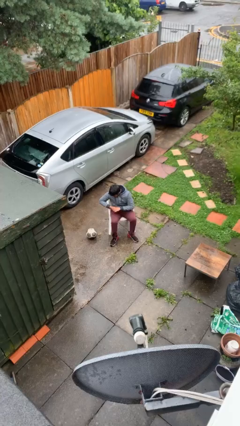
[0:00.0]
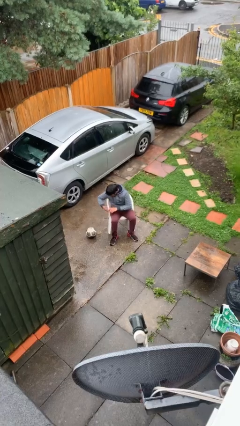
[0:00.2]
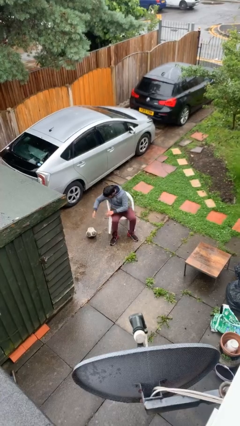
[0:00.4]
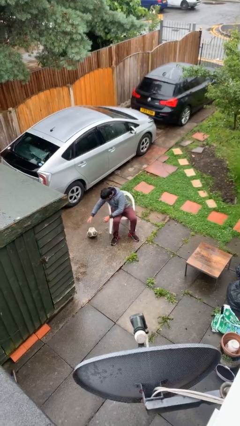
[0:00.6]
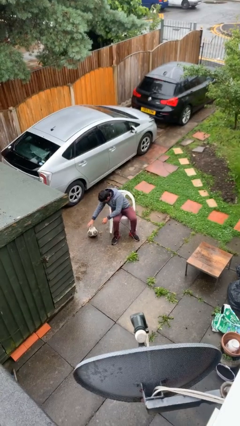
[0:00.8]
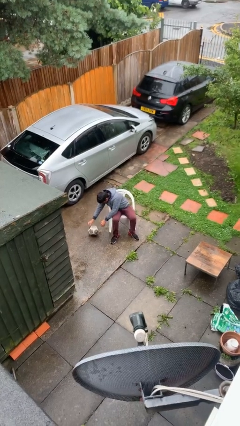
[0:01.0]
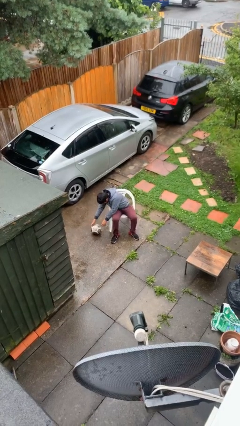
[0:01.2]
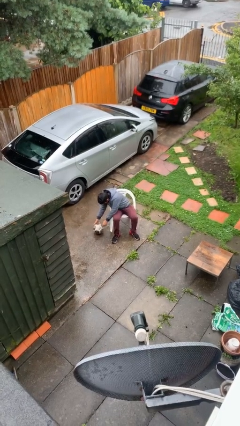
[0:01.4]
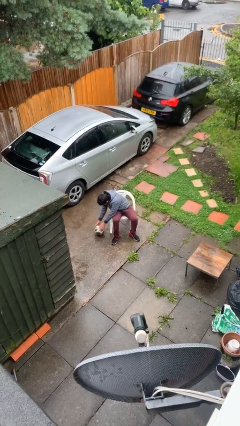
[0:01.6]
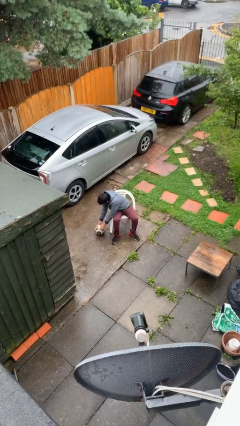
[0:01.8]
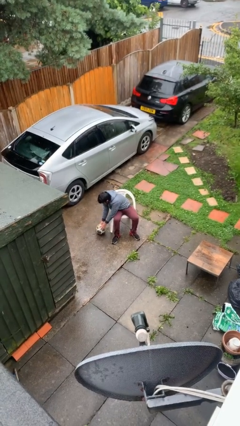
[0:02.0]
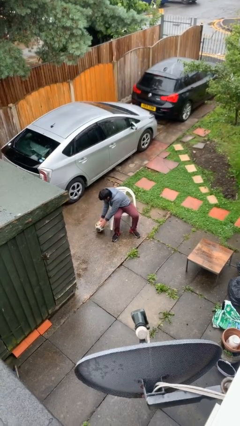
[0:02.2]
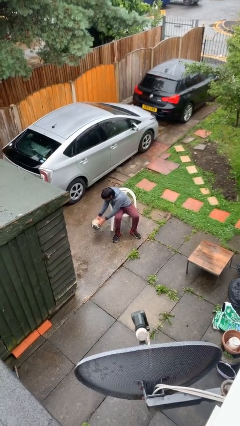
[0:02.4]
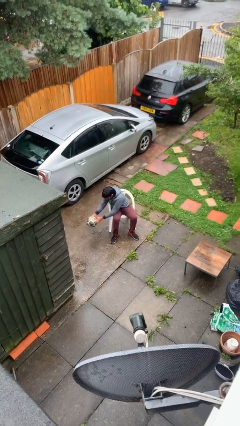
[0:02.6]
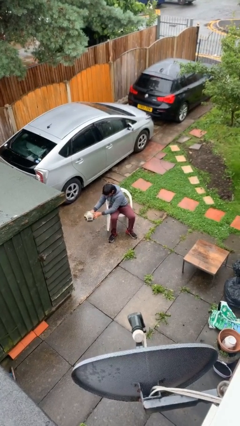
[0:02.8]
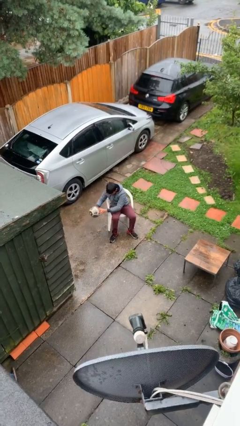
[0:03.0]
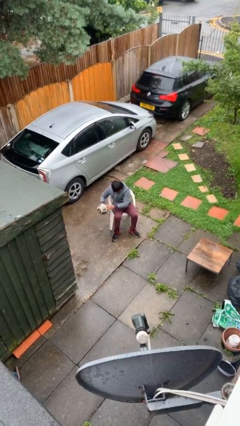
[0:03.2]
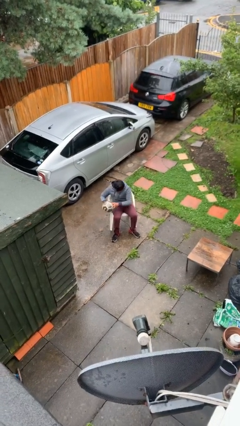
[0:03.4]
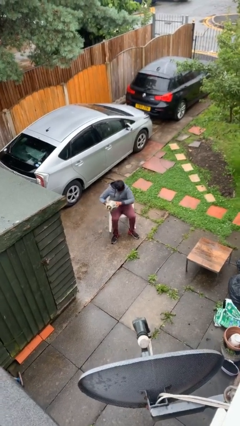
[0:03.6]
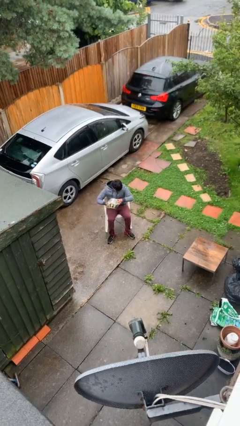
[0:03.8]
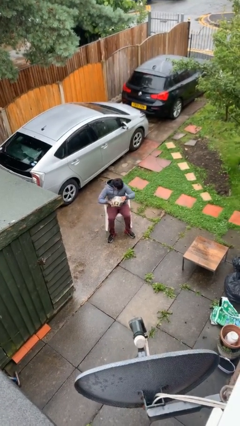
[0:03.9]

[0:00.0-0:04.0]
person picks up object from floor

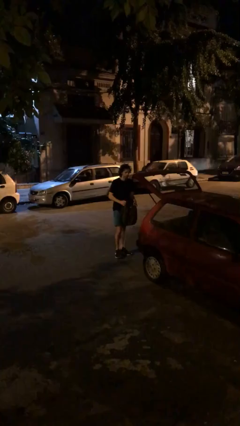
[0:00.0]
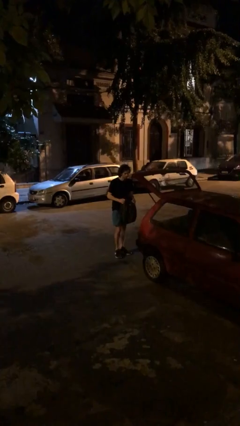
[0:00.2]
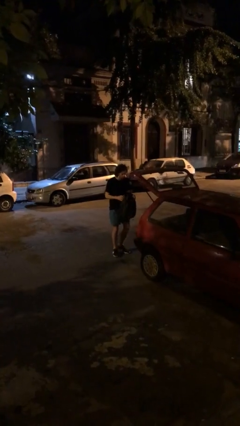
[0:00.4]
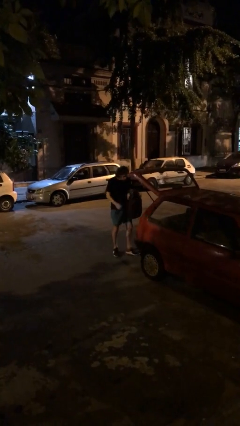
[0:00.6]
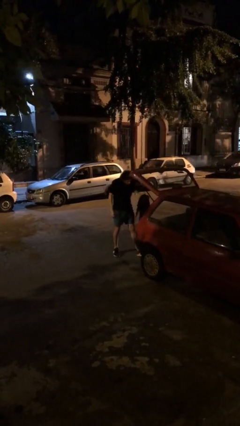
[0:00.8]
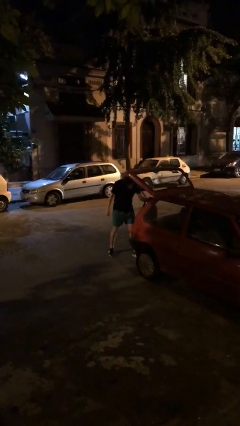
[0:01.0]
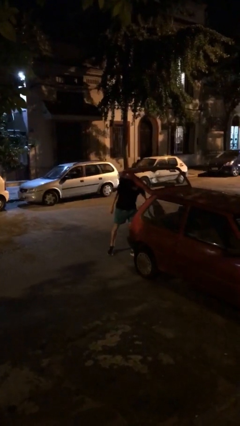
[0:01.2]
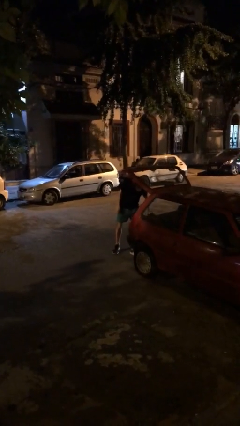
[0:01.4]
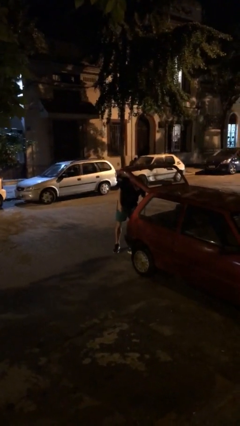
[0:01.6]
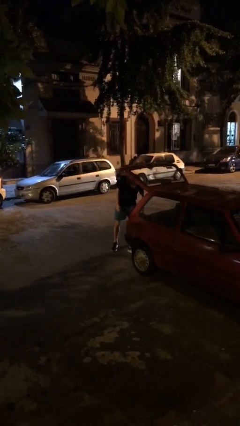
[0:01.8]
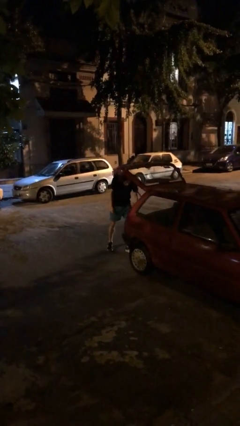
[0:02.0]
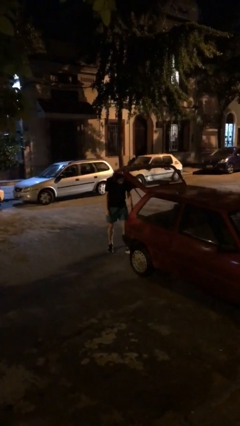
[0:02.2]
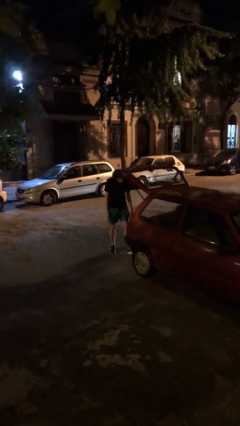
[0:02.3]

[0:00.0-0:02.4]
person loads car

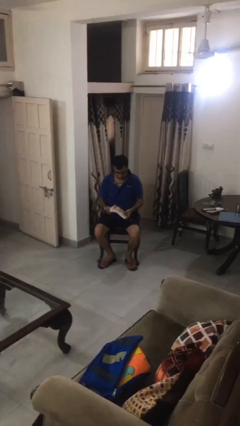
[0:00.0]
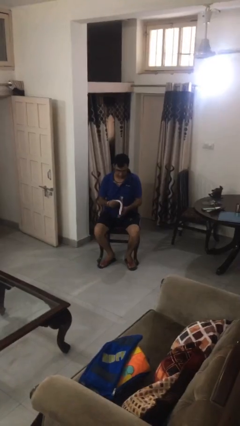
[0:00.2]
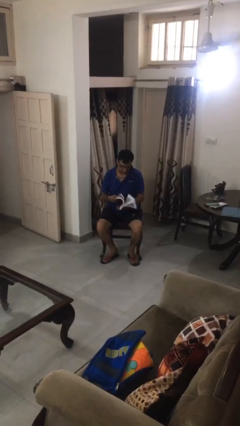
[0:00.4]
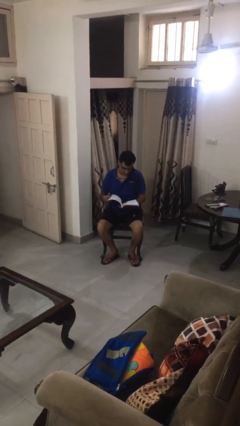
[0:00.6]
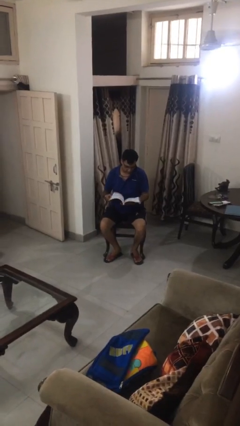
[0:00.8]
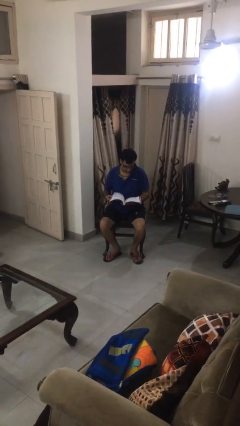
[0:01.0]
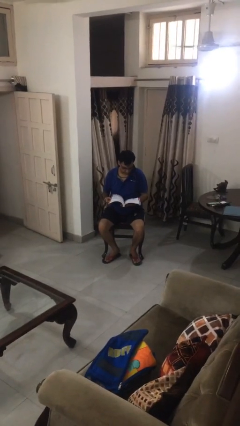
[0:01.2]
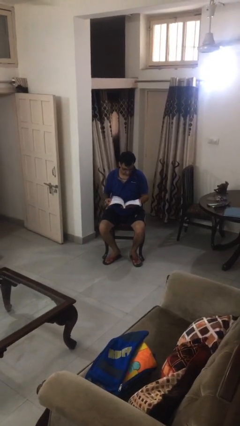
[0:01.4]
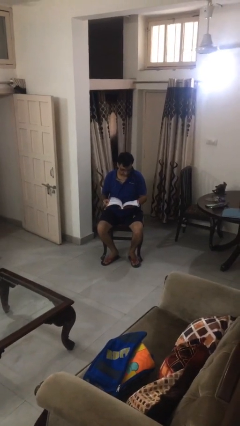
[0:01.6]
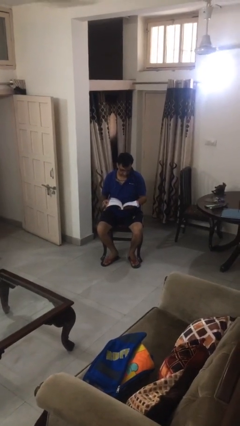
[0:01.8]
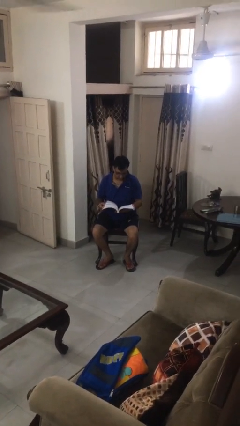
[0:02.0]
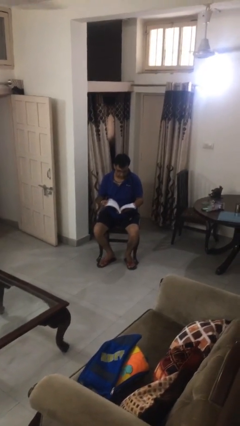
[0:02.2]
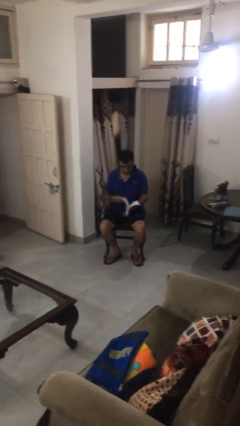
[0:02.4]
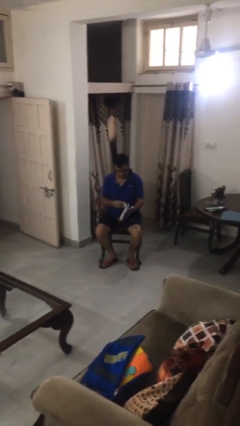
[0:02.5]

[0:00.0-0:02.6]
person reads book

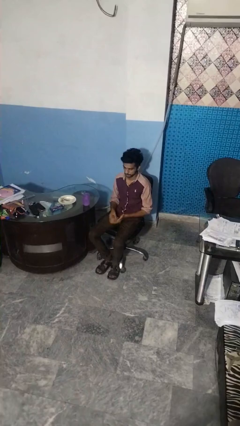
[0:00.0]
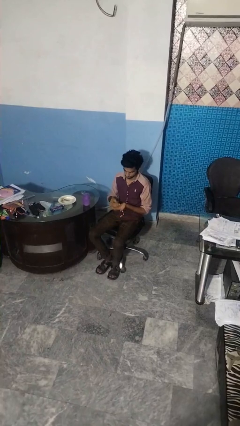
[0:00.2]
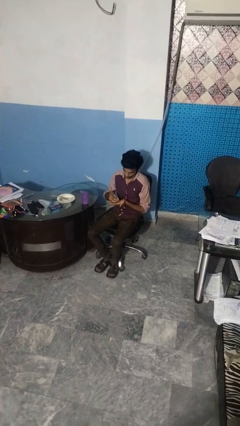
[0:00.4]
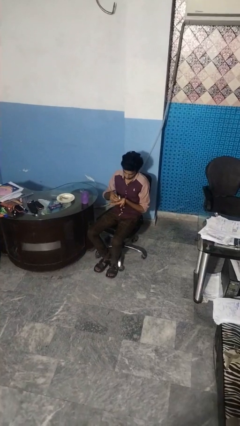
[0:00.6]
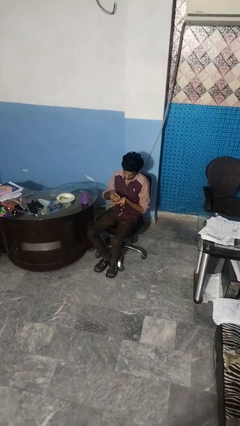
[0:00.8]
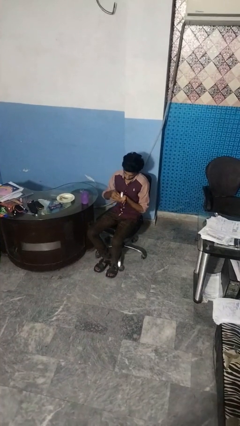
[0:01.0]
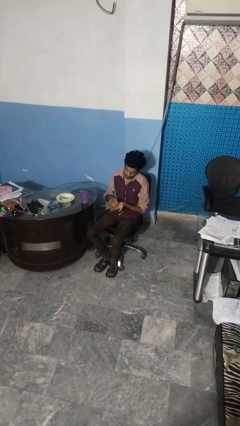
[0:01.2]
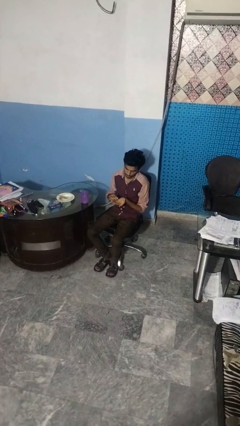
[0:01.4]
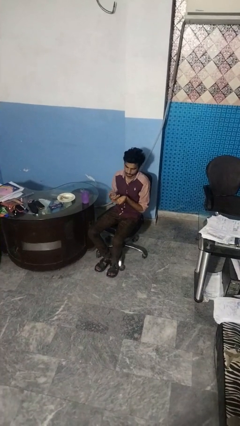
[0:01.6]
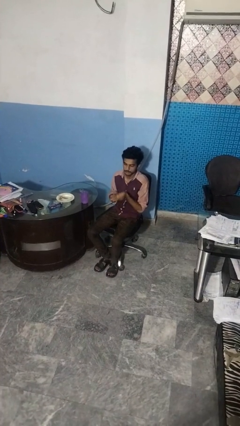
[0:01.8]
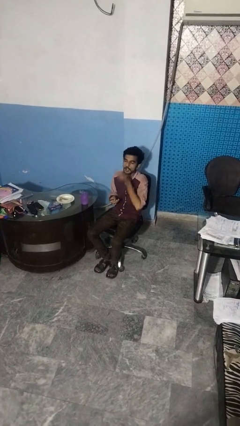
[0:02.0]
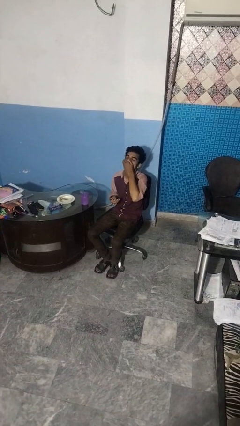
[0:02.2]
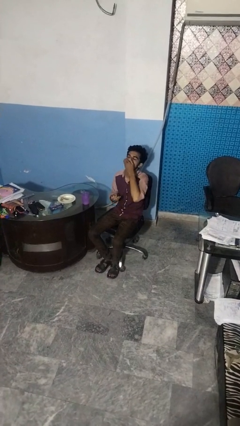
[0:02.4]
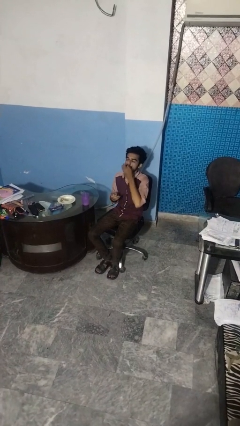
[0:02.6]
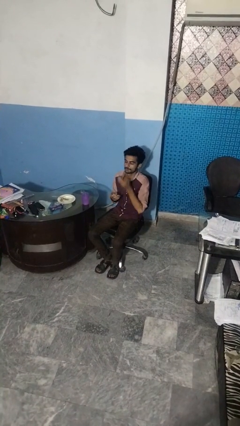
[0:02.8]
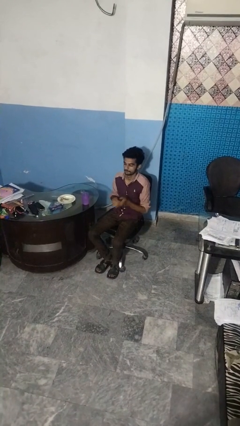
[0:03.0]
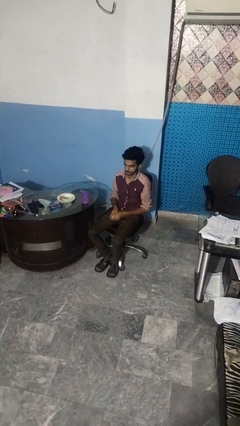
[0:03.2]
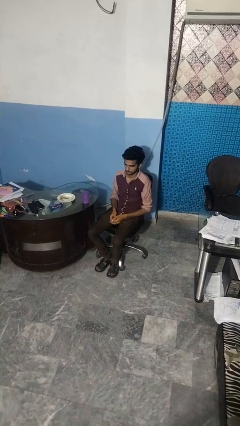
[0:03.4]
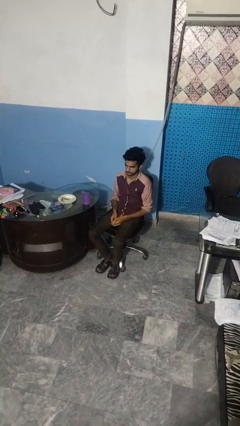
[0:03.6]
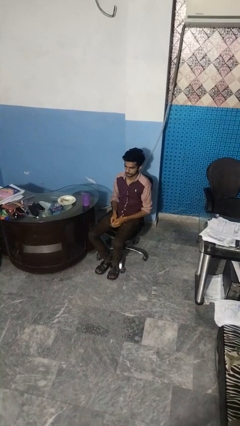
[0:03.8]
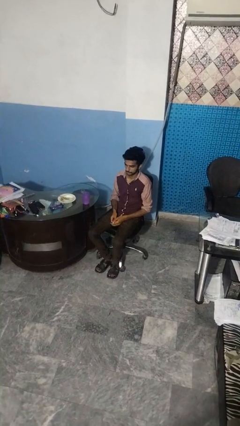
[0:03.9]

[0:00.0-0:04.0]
person takes medicine pills

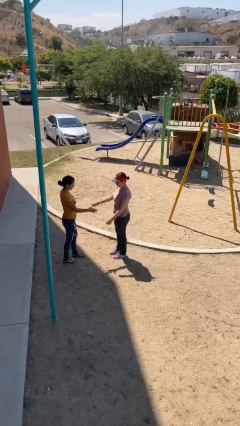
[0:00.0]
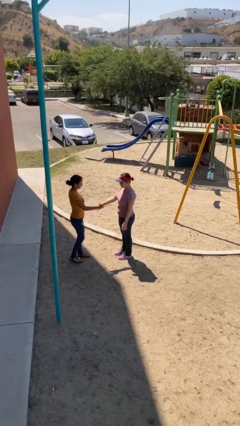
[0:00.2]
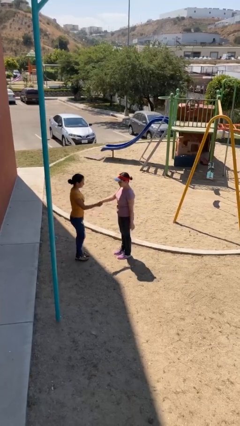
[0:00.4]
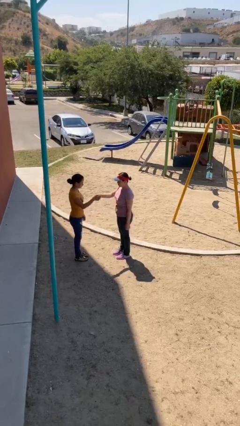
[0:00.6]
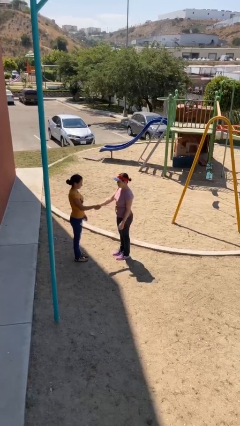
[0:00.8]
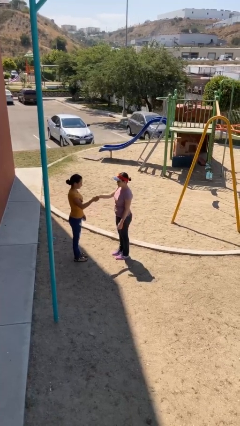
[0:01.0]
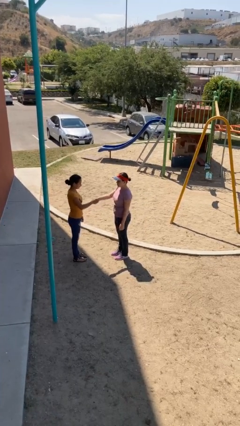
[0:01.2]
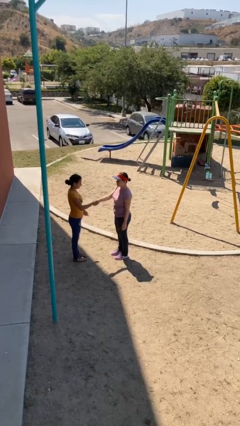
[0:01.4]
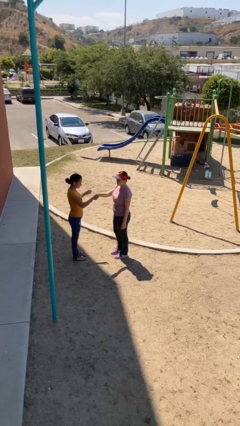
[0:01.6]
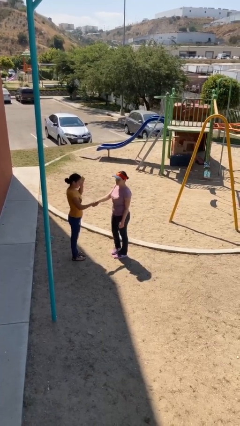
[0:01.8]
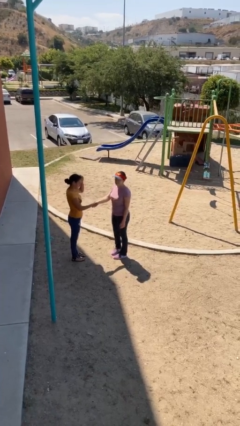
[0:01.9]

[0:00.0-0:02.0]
person shakes hand

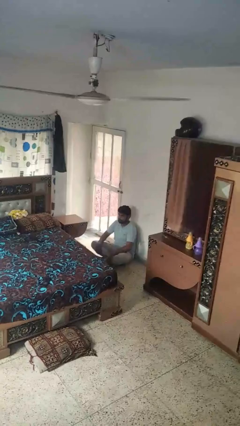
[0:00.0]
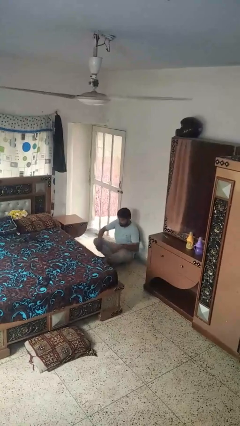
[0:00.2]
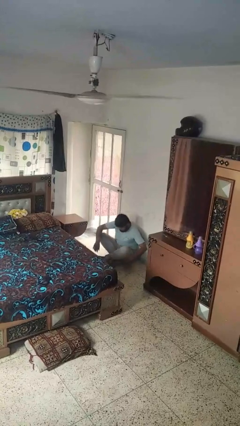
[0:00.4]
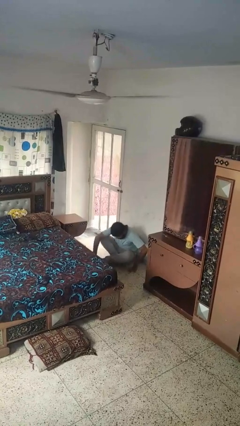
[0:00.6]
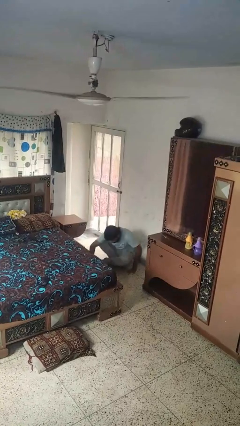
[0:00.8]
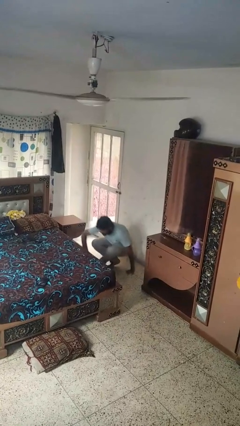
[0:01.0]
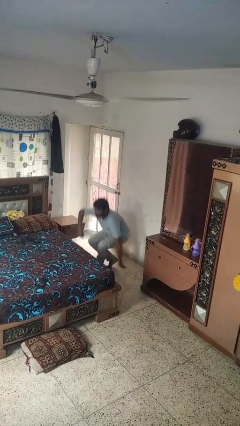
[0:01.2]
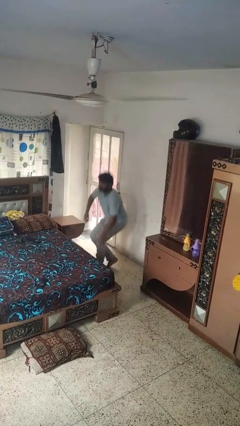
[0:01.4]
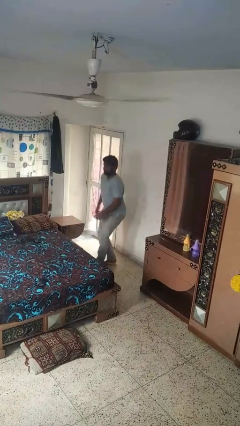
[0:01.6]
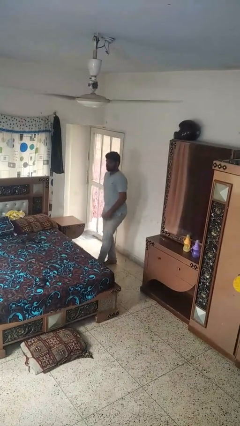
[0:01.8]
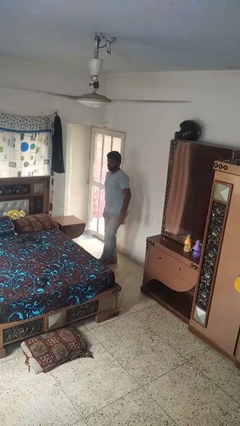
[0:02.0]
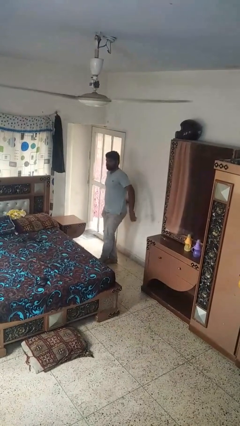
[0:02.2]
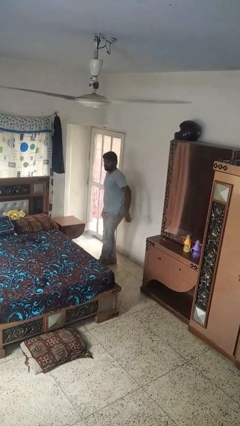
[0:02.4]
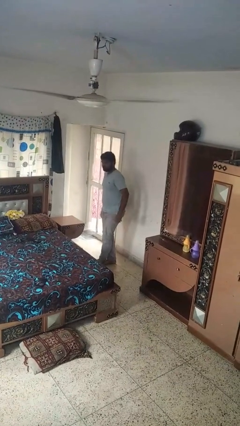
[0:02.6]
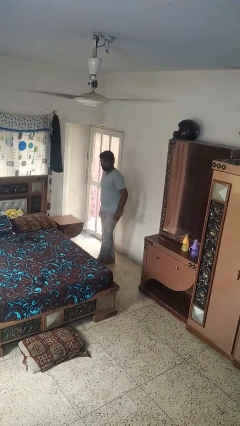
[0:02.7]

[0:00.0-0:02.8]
person stands up from floor
